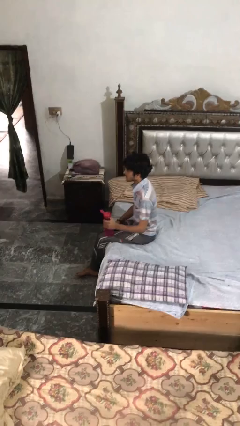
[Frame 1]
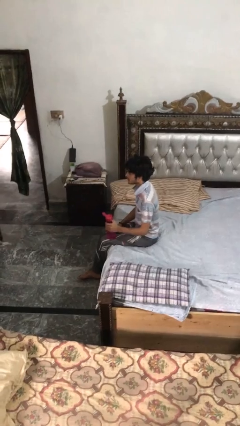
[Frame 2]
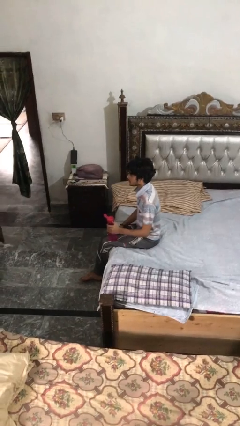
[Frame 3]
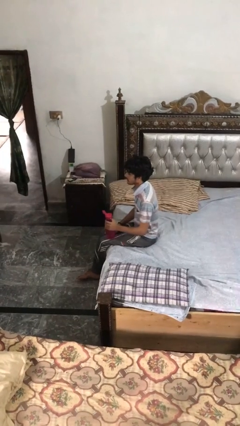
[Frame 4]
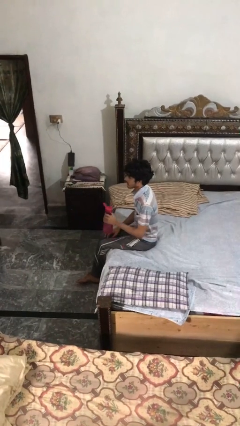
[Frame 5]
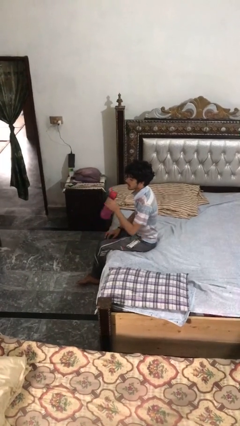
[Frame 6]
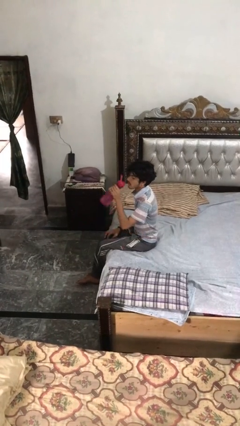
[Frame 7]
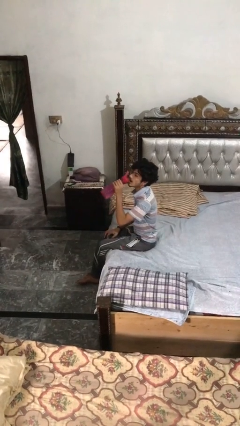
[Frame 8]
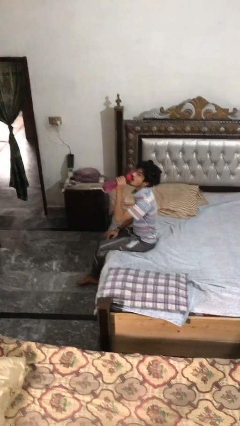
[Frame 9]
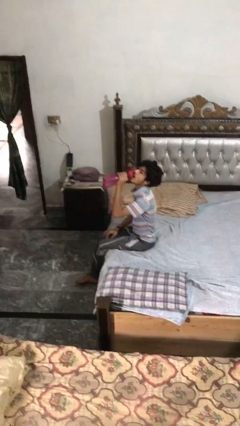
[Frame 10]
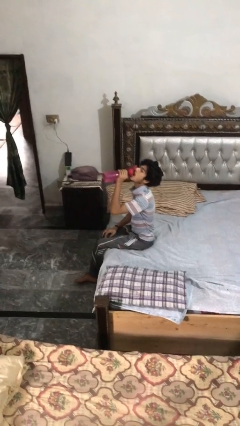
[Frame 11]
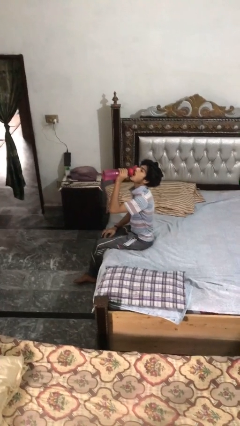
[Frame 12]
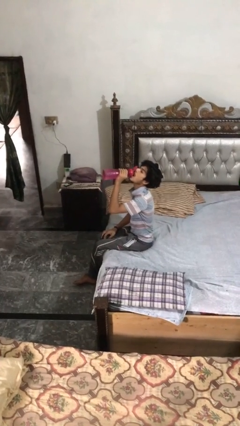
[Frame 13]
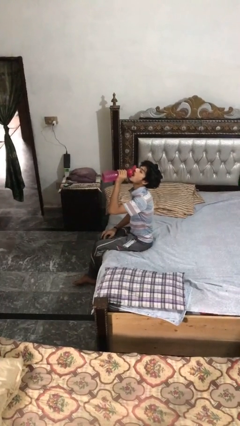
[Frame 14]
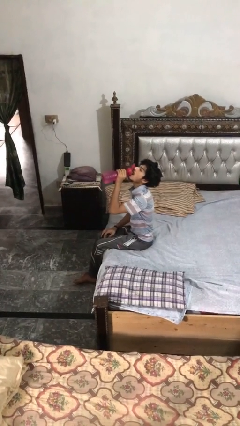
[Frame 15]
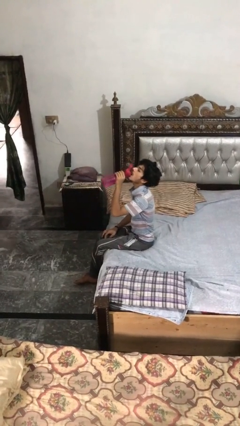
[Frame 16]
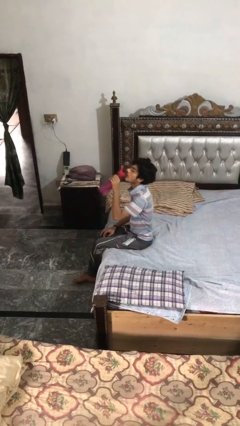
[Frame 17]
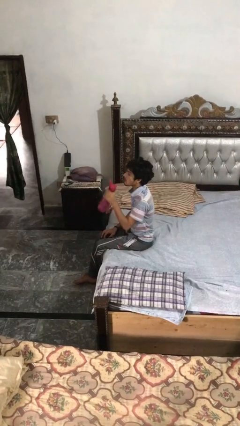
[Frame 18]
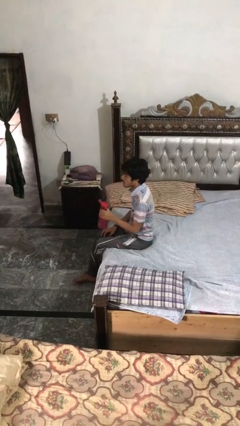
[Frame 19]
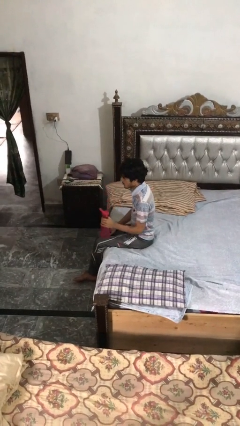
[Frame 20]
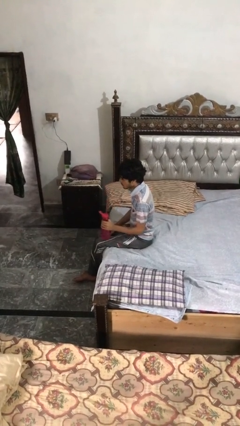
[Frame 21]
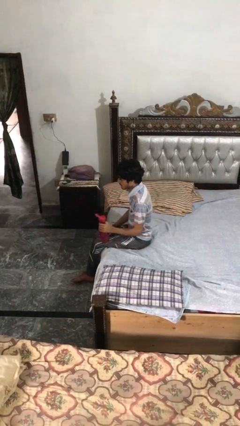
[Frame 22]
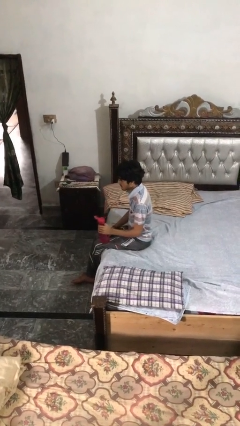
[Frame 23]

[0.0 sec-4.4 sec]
person drinks from bottle

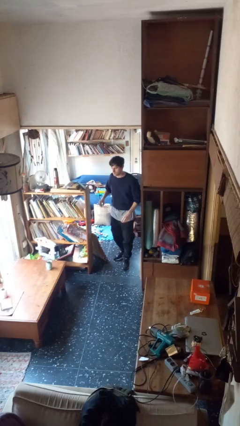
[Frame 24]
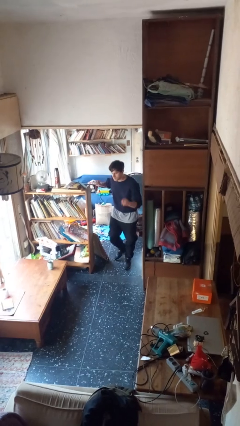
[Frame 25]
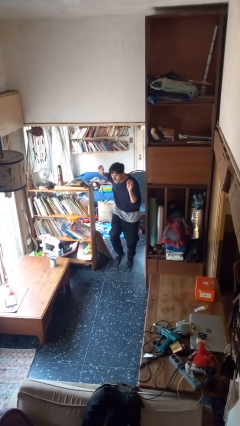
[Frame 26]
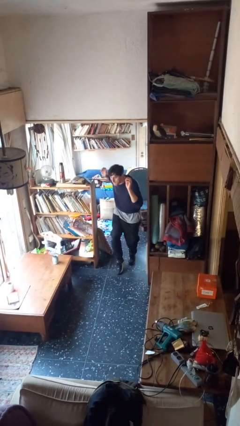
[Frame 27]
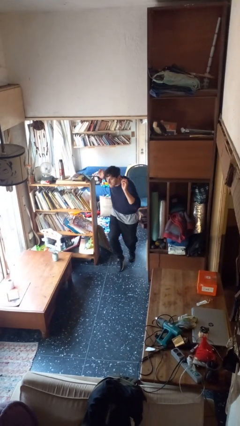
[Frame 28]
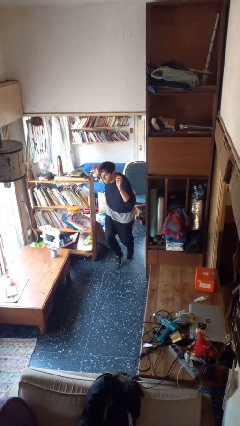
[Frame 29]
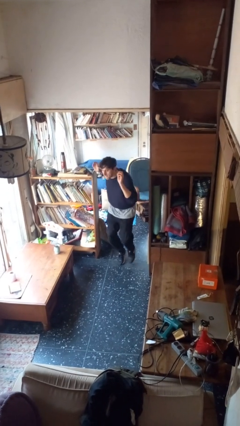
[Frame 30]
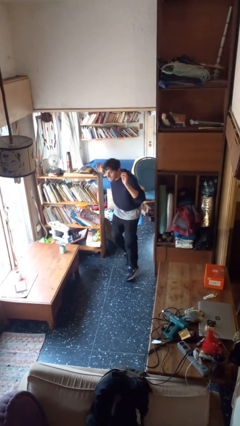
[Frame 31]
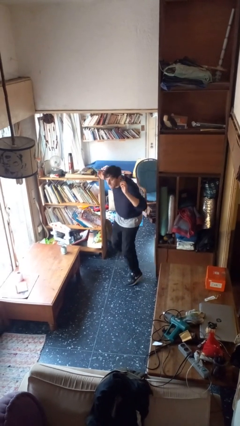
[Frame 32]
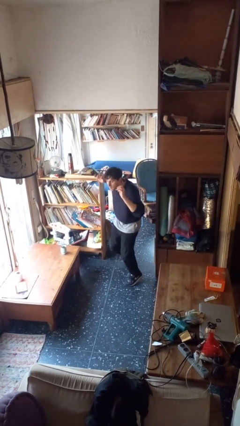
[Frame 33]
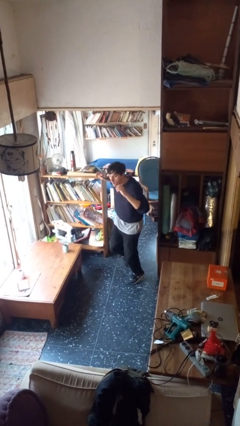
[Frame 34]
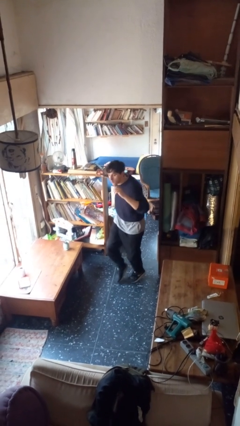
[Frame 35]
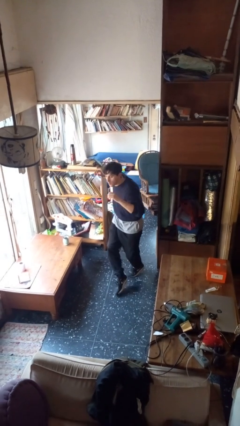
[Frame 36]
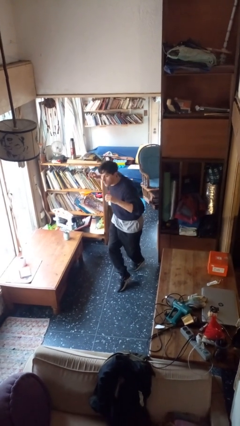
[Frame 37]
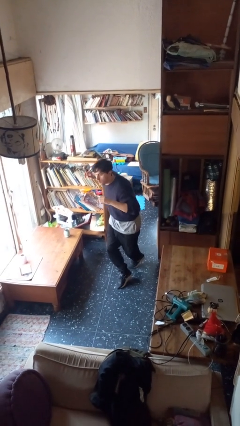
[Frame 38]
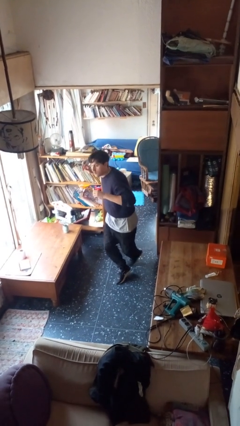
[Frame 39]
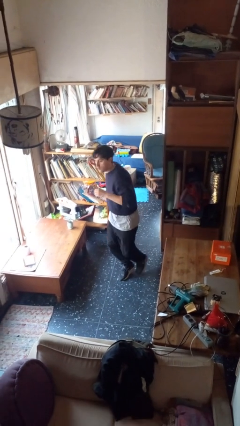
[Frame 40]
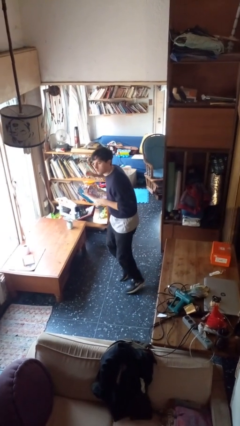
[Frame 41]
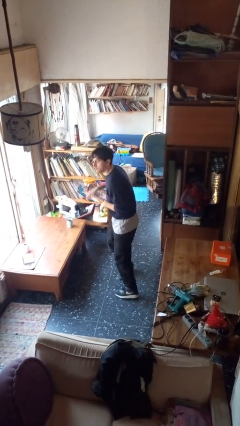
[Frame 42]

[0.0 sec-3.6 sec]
person walks tiptoe

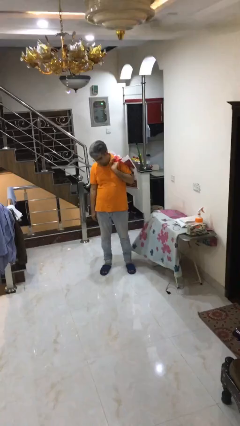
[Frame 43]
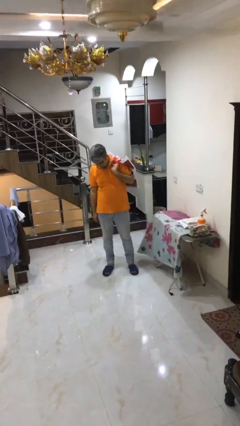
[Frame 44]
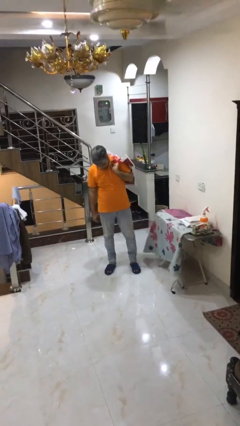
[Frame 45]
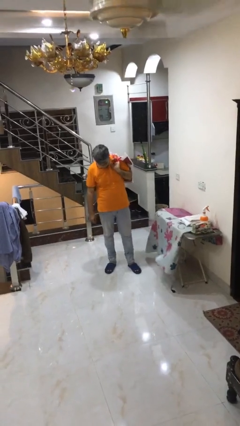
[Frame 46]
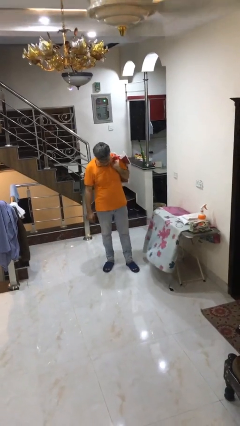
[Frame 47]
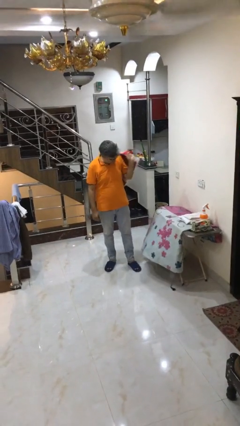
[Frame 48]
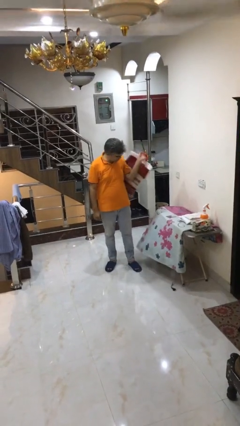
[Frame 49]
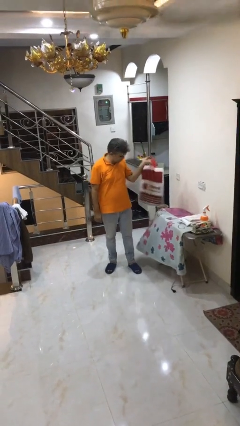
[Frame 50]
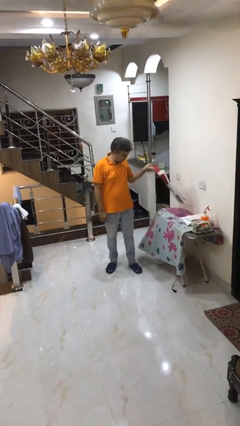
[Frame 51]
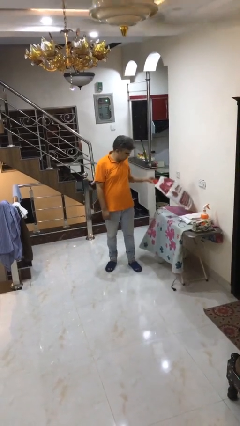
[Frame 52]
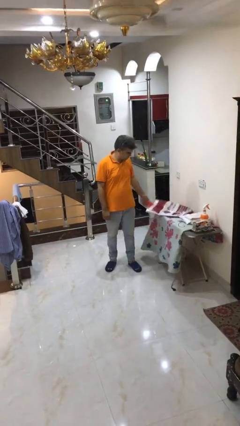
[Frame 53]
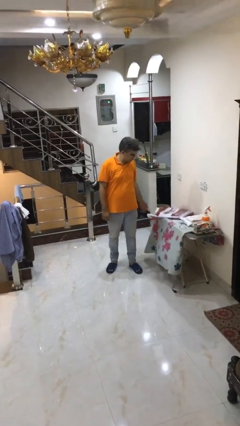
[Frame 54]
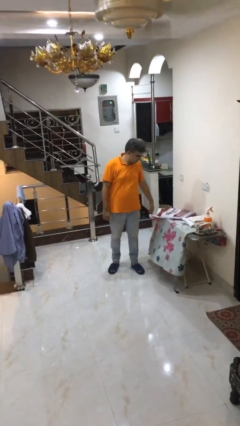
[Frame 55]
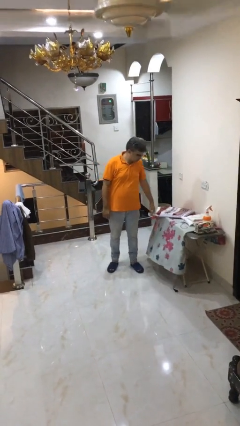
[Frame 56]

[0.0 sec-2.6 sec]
person puts down object on table

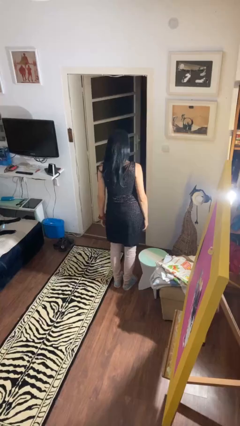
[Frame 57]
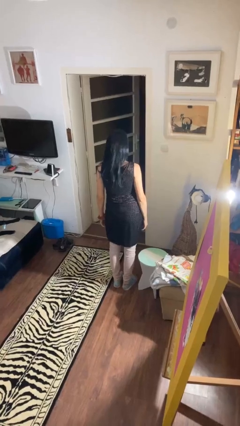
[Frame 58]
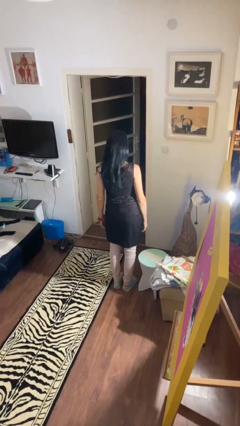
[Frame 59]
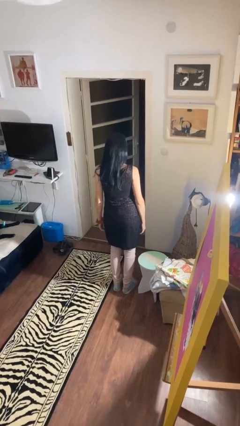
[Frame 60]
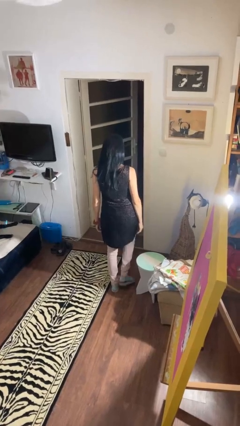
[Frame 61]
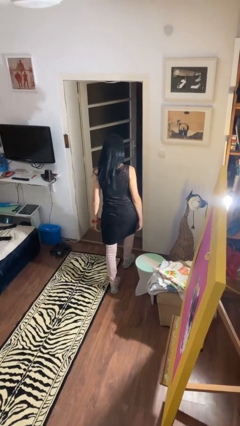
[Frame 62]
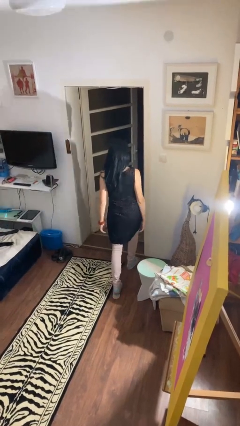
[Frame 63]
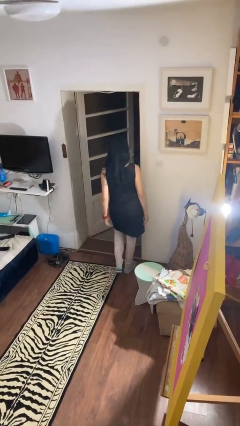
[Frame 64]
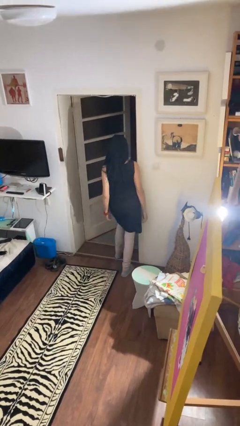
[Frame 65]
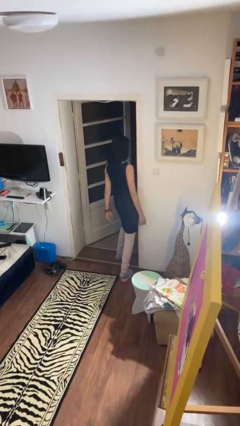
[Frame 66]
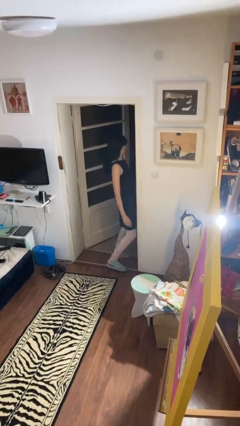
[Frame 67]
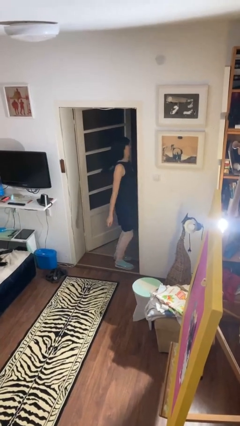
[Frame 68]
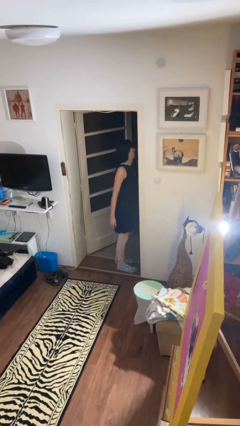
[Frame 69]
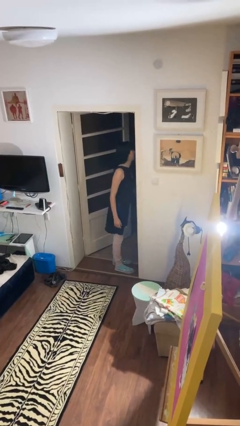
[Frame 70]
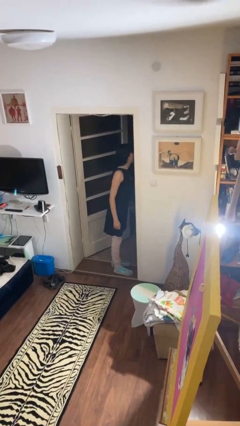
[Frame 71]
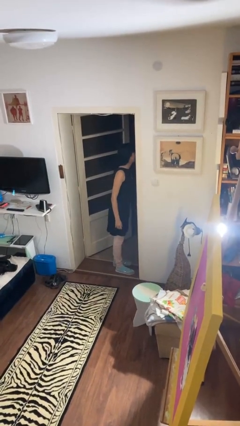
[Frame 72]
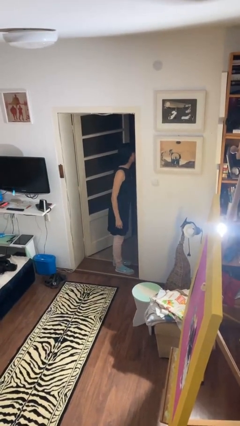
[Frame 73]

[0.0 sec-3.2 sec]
person bumps into wall

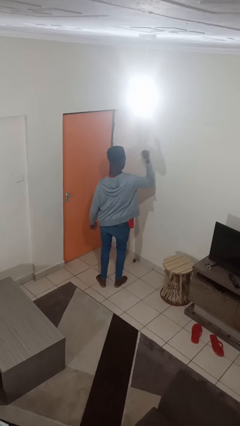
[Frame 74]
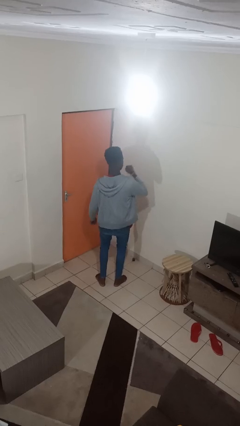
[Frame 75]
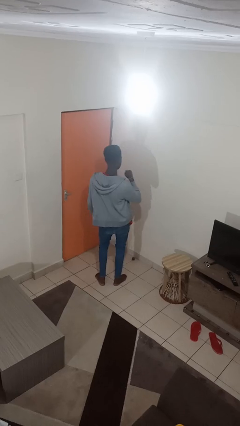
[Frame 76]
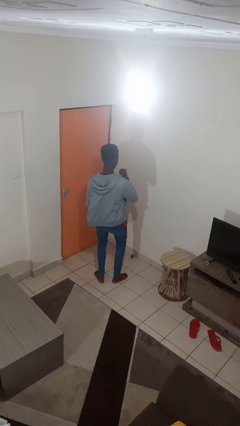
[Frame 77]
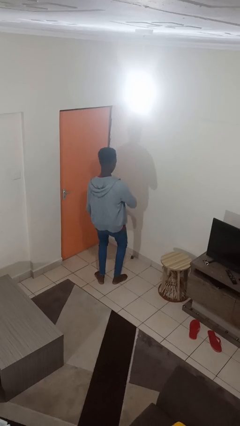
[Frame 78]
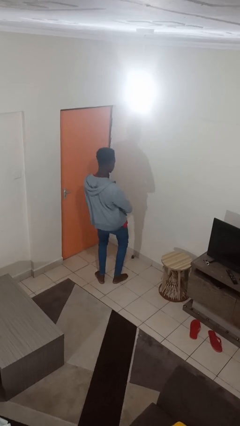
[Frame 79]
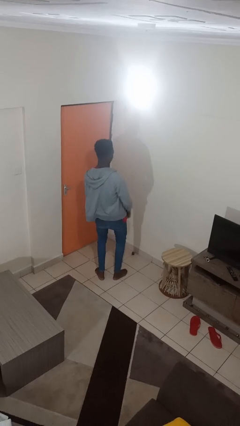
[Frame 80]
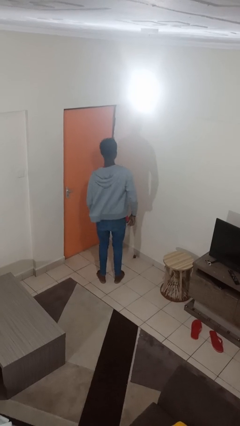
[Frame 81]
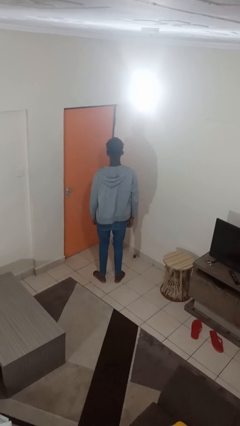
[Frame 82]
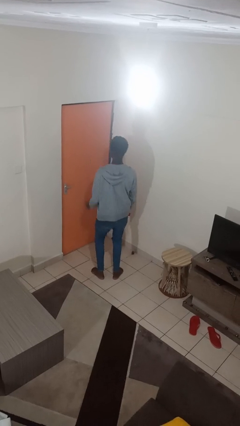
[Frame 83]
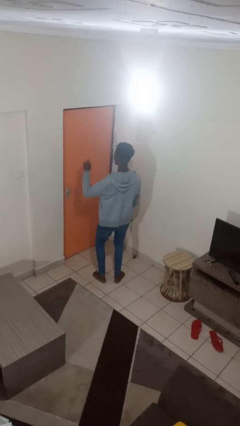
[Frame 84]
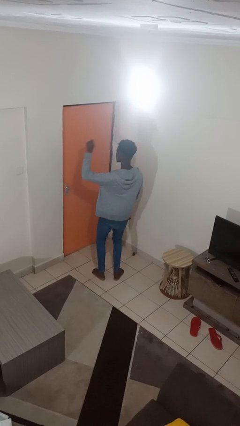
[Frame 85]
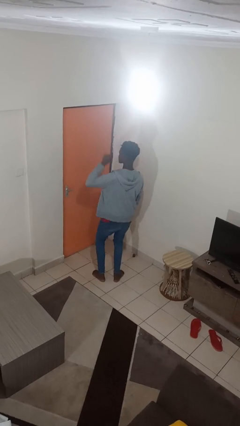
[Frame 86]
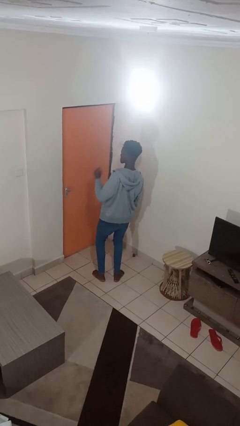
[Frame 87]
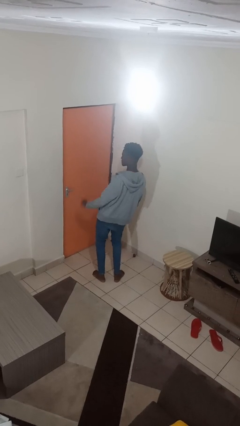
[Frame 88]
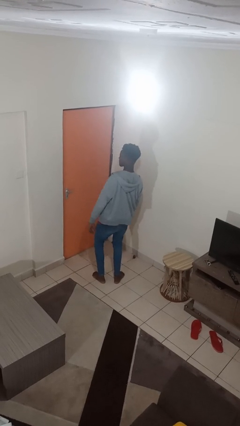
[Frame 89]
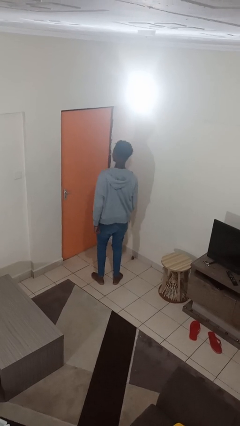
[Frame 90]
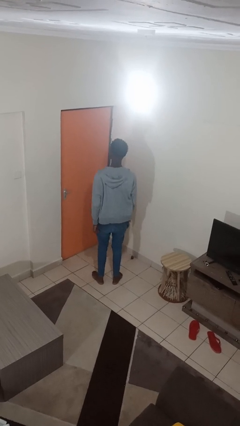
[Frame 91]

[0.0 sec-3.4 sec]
person dances in place

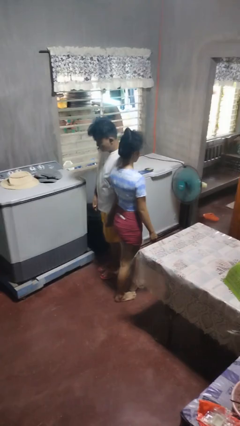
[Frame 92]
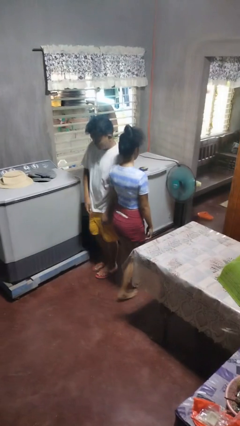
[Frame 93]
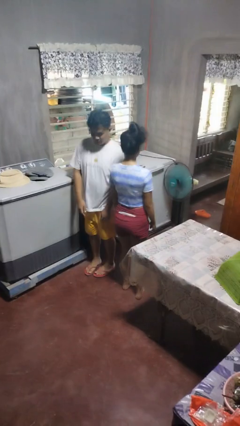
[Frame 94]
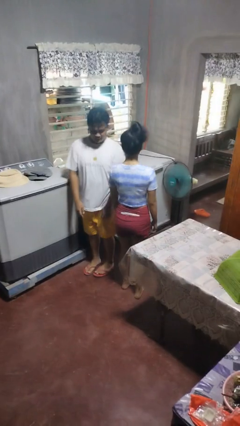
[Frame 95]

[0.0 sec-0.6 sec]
person bumps into person

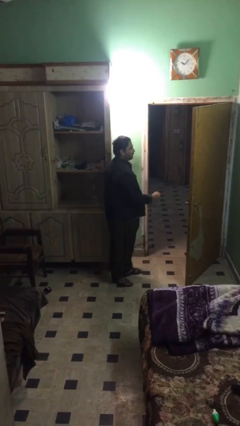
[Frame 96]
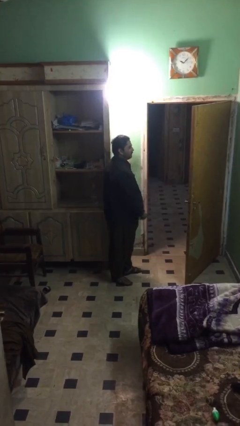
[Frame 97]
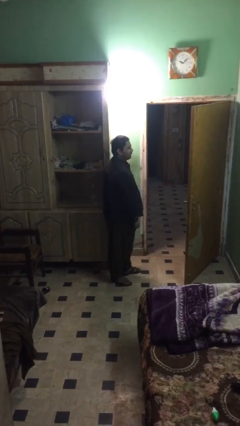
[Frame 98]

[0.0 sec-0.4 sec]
person closes facility door
